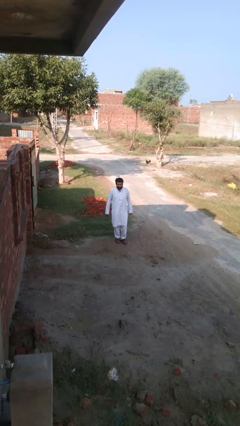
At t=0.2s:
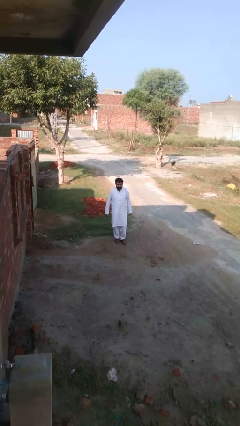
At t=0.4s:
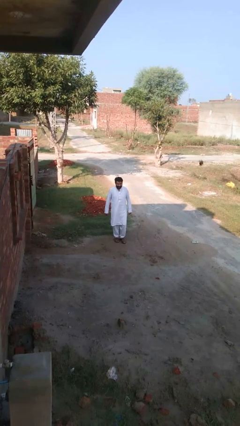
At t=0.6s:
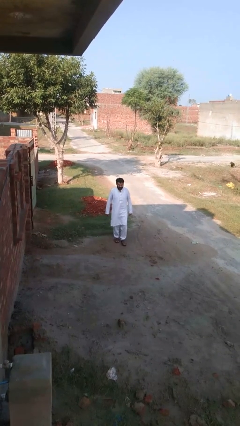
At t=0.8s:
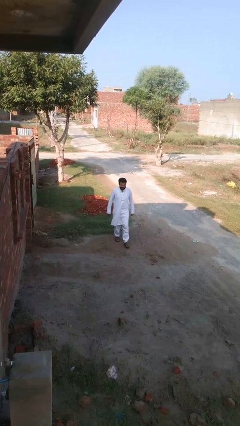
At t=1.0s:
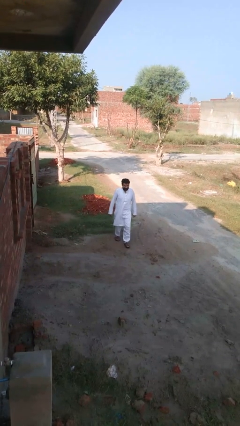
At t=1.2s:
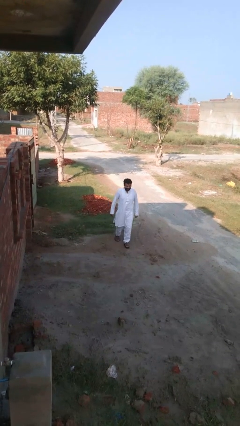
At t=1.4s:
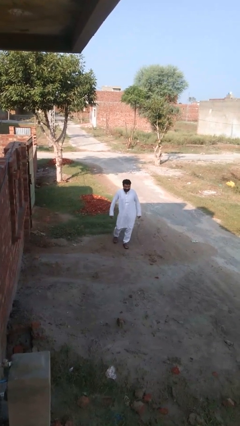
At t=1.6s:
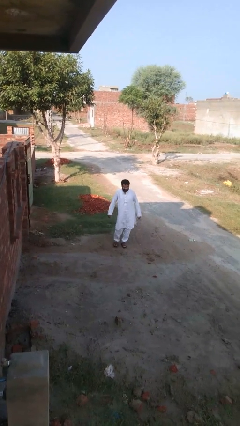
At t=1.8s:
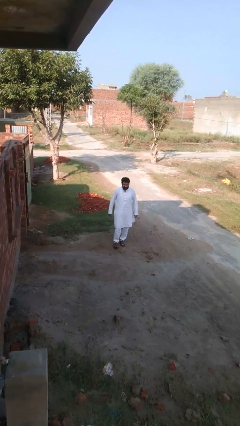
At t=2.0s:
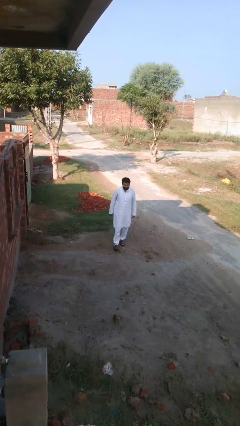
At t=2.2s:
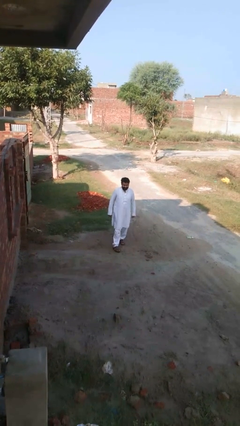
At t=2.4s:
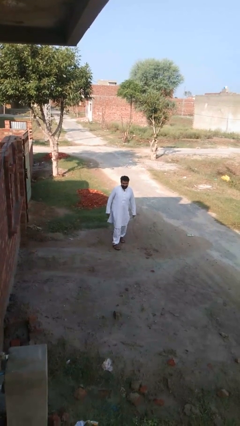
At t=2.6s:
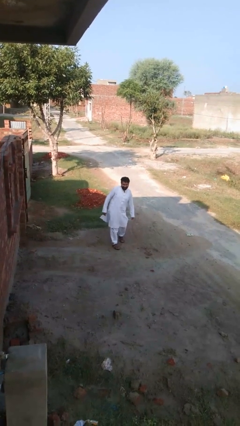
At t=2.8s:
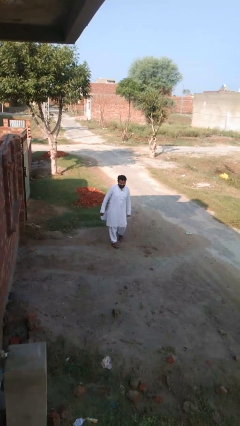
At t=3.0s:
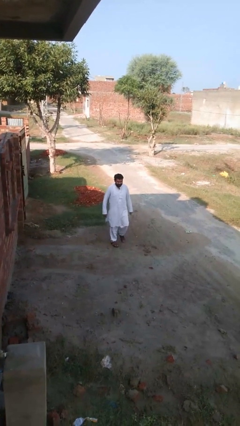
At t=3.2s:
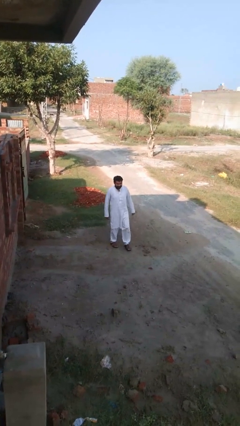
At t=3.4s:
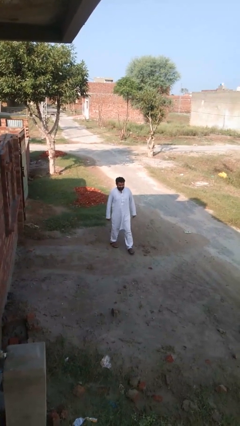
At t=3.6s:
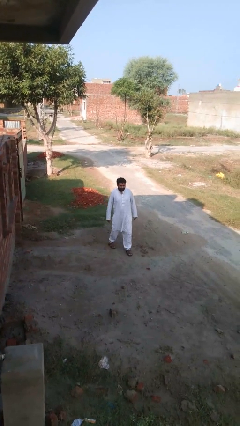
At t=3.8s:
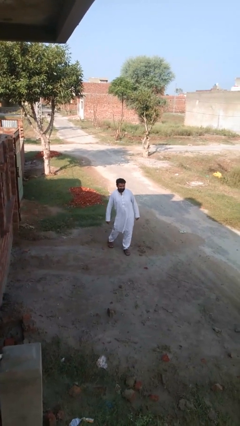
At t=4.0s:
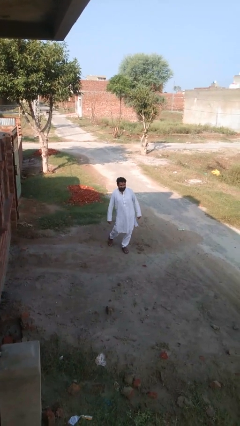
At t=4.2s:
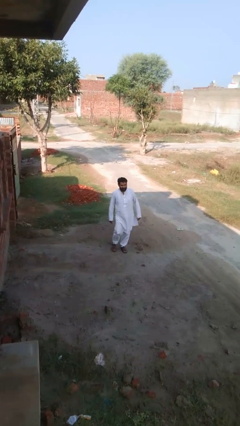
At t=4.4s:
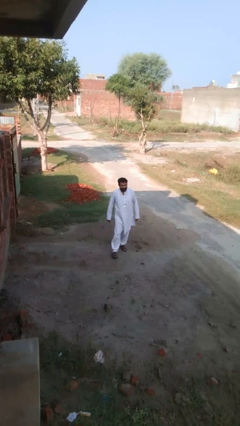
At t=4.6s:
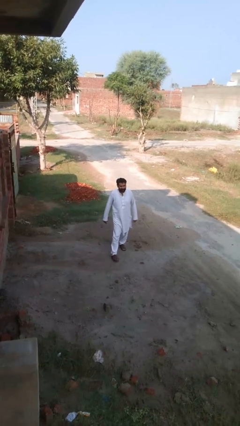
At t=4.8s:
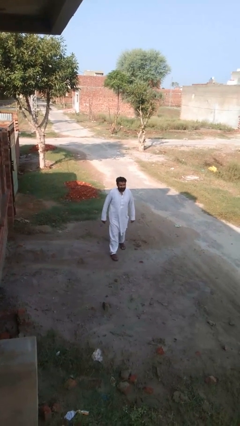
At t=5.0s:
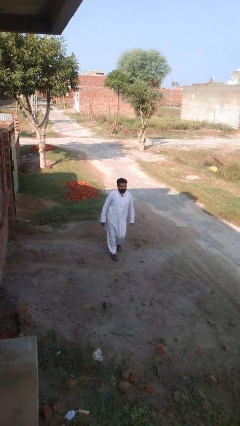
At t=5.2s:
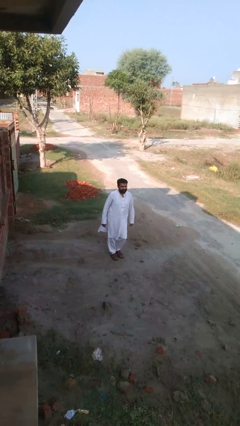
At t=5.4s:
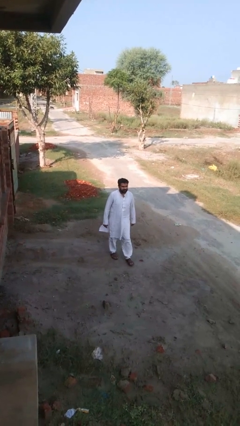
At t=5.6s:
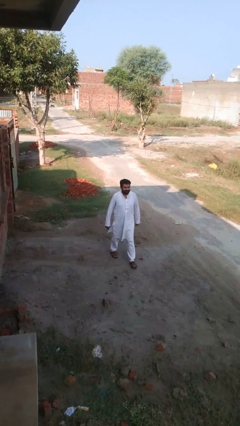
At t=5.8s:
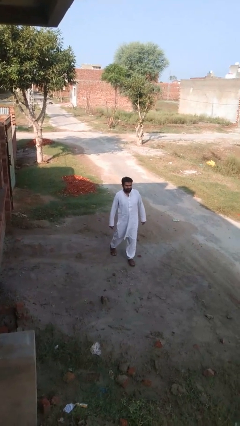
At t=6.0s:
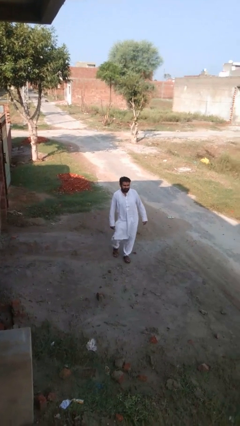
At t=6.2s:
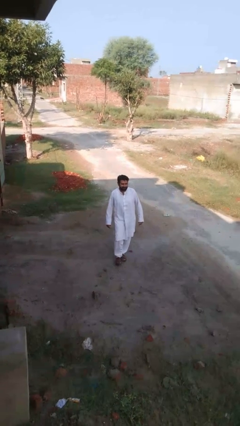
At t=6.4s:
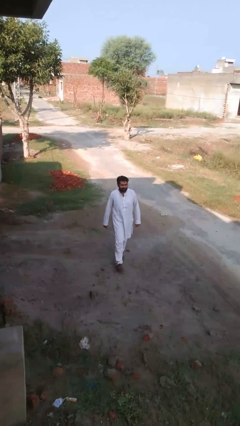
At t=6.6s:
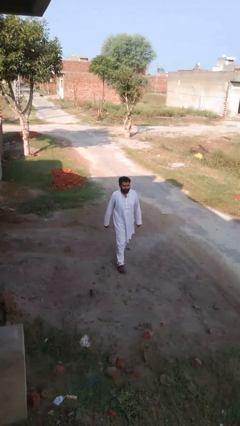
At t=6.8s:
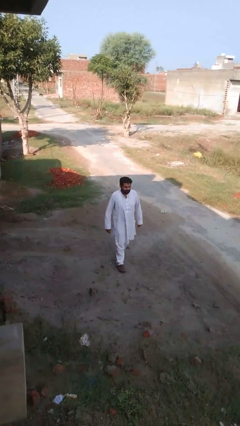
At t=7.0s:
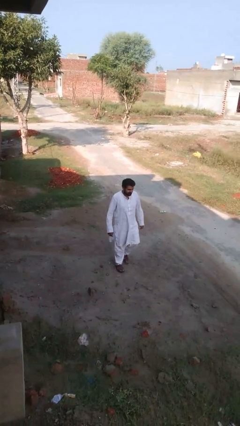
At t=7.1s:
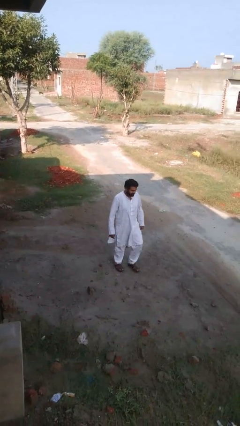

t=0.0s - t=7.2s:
person walks tiptoe

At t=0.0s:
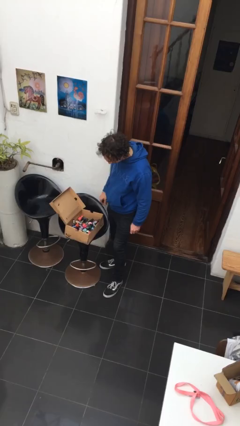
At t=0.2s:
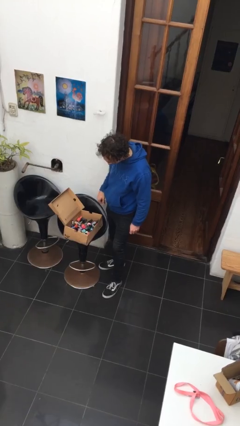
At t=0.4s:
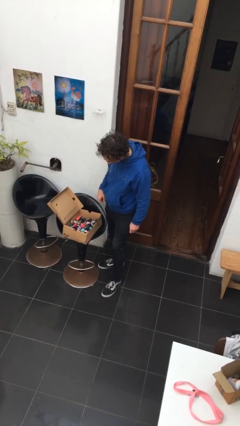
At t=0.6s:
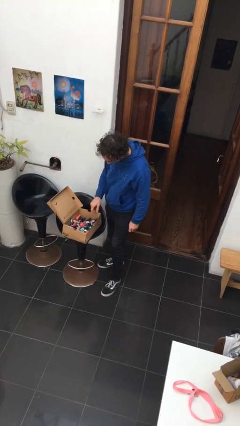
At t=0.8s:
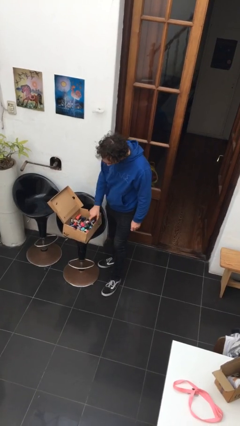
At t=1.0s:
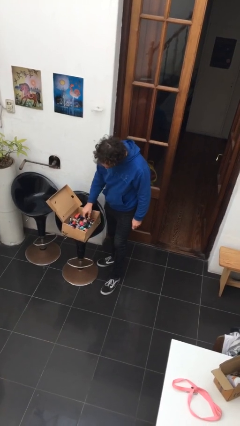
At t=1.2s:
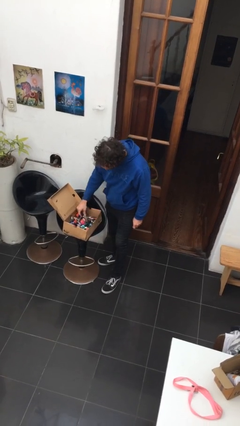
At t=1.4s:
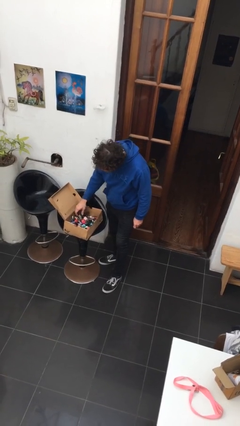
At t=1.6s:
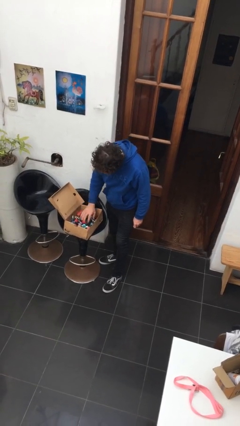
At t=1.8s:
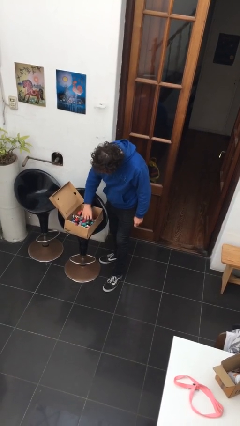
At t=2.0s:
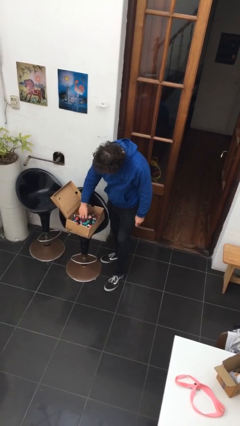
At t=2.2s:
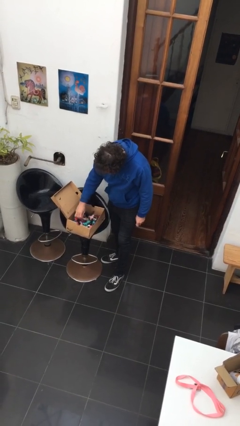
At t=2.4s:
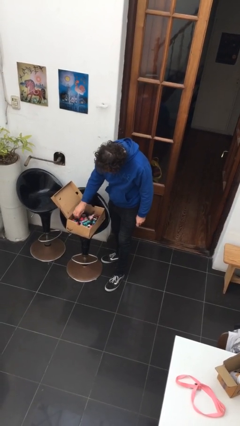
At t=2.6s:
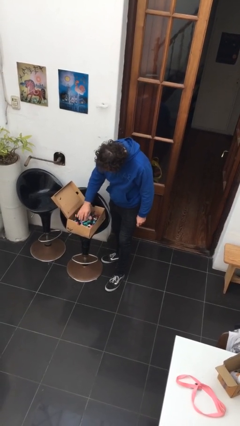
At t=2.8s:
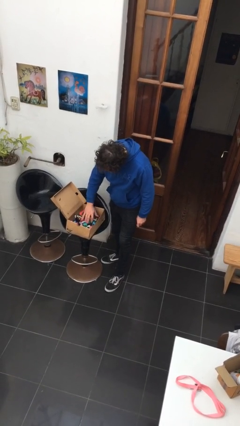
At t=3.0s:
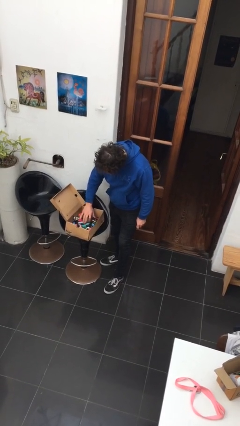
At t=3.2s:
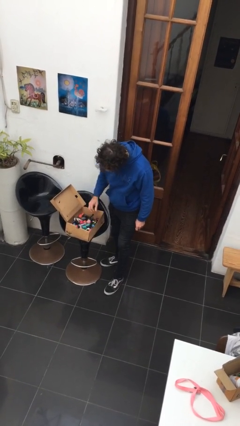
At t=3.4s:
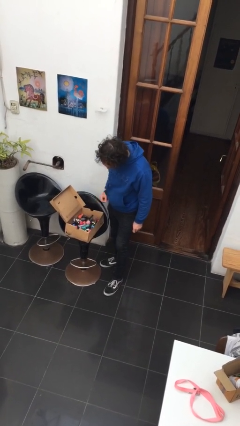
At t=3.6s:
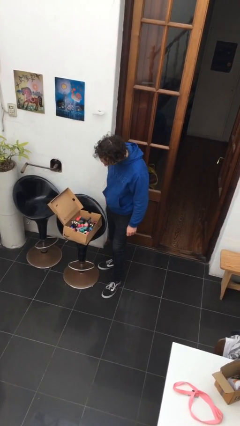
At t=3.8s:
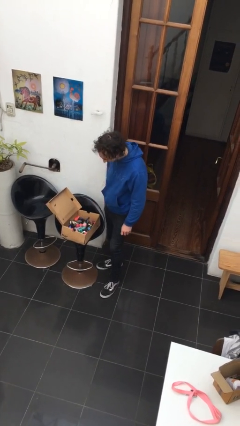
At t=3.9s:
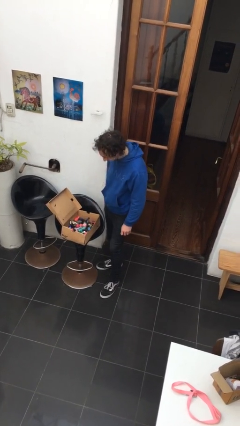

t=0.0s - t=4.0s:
person searches in box

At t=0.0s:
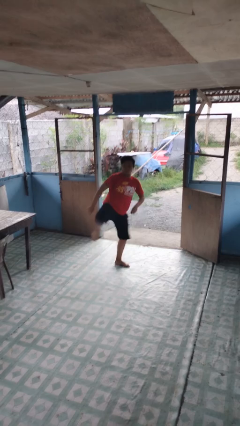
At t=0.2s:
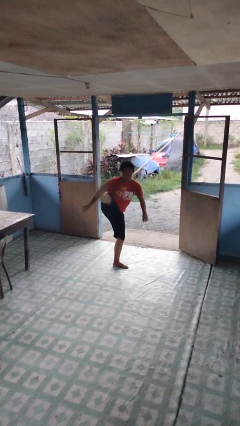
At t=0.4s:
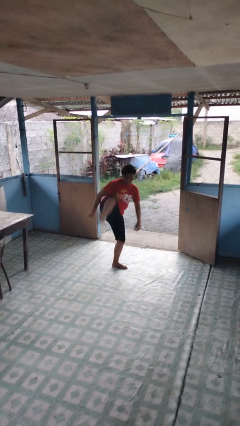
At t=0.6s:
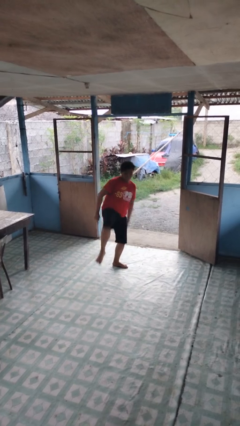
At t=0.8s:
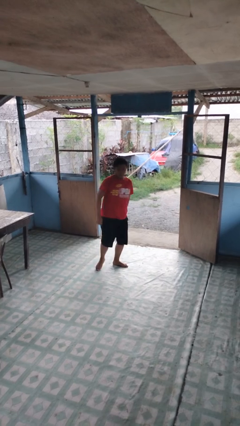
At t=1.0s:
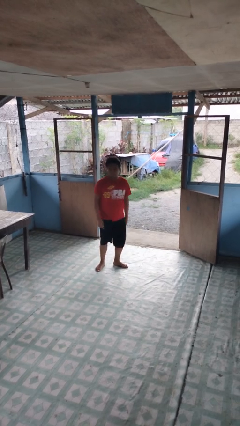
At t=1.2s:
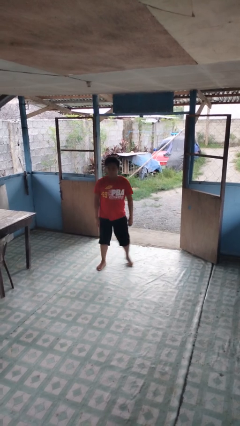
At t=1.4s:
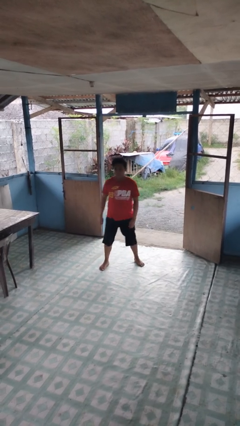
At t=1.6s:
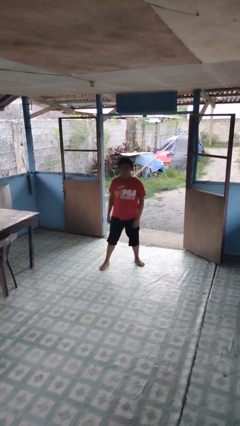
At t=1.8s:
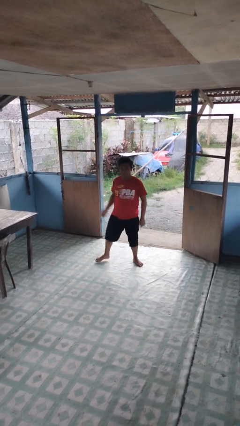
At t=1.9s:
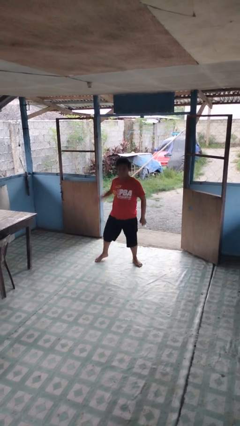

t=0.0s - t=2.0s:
person karate kicks

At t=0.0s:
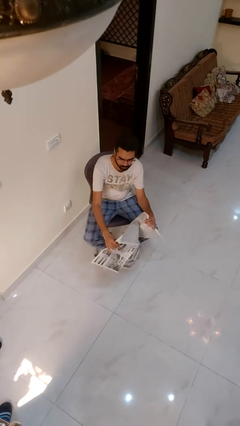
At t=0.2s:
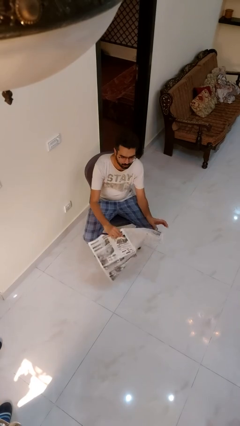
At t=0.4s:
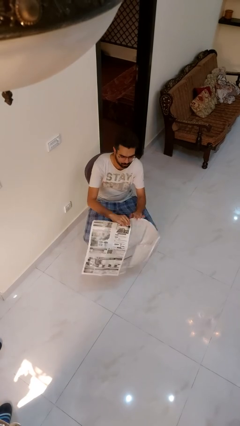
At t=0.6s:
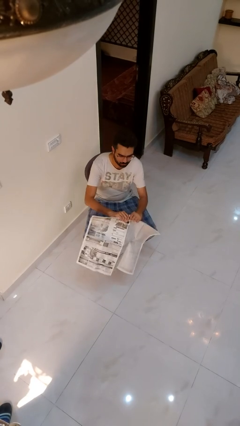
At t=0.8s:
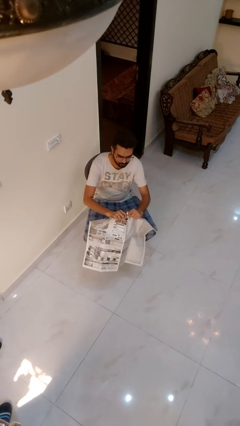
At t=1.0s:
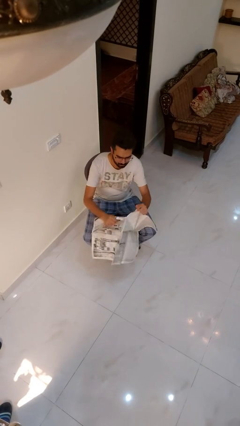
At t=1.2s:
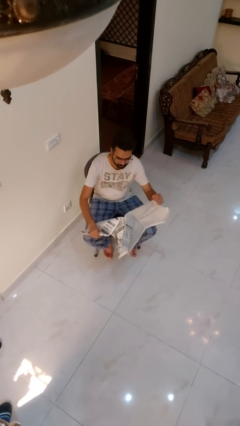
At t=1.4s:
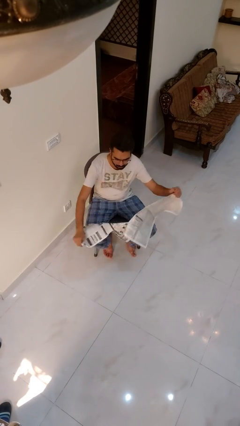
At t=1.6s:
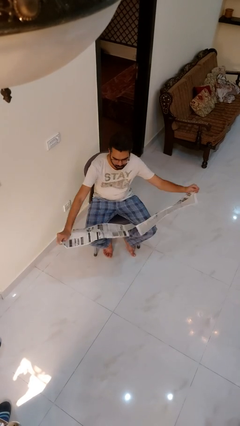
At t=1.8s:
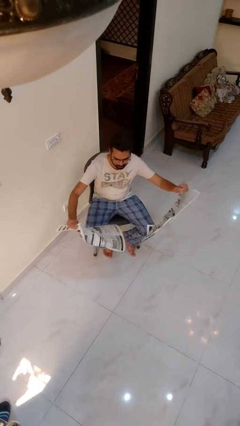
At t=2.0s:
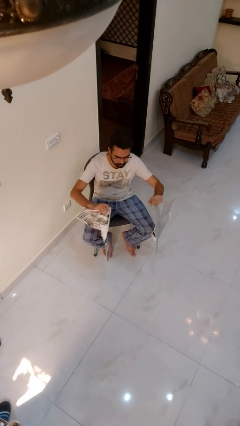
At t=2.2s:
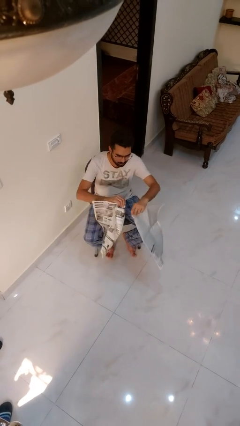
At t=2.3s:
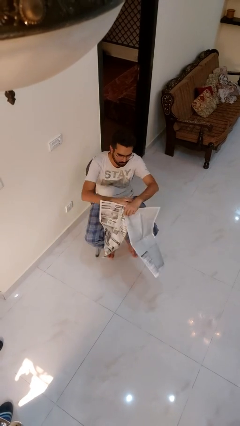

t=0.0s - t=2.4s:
person tears paper

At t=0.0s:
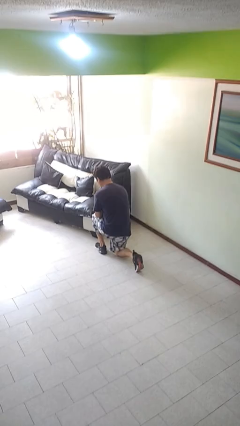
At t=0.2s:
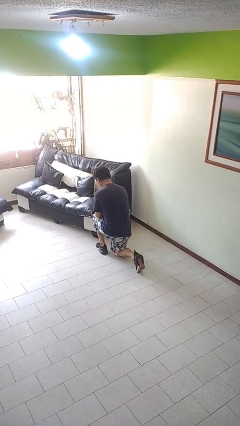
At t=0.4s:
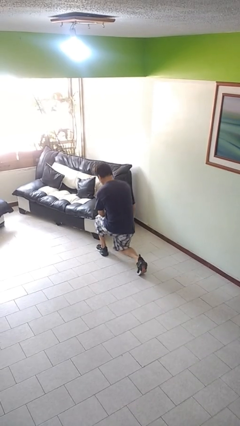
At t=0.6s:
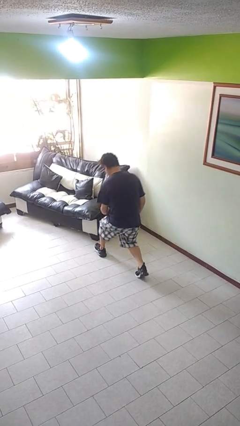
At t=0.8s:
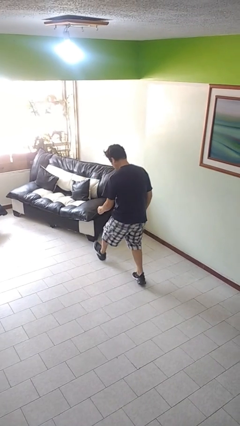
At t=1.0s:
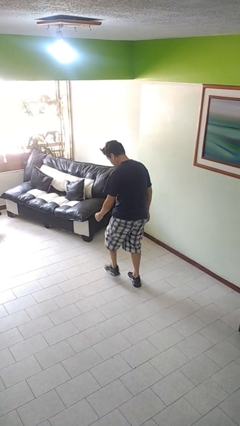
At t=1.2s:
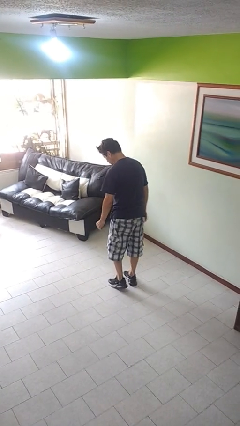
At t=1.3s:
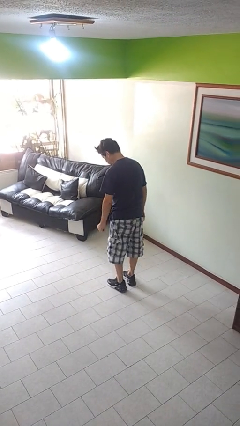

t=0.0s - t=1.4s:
person stands up from floor
